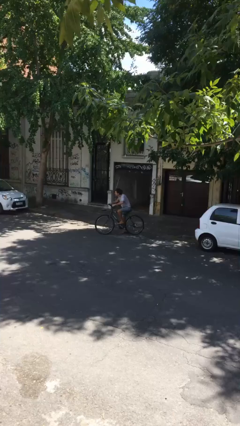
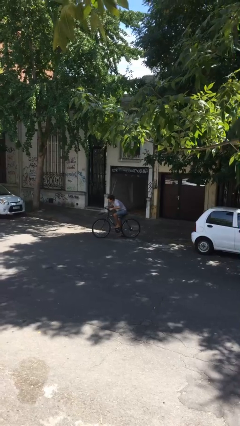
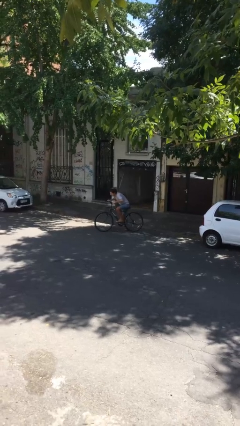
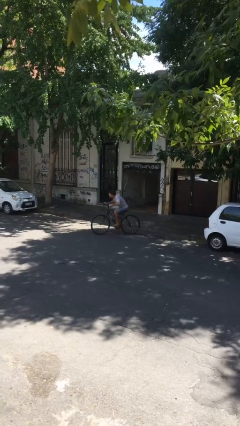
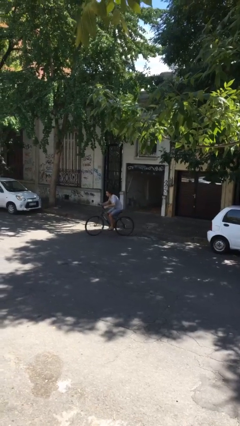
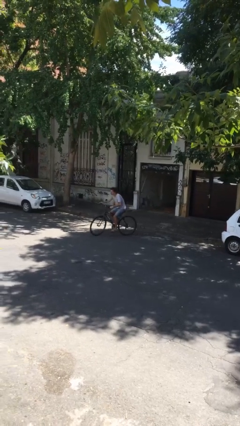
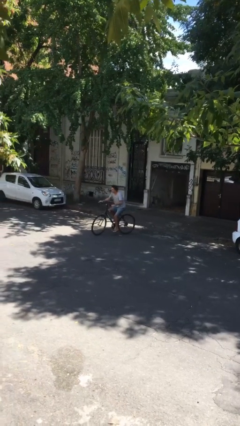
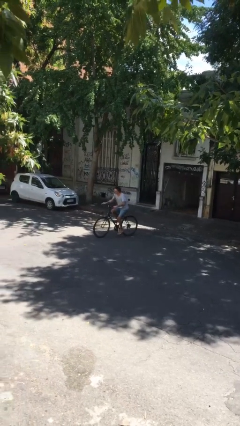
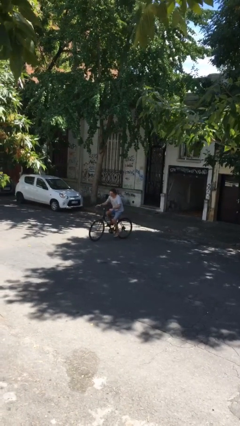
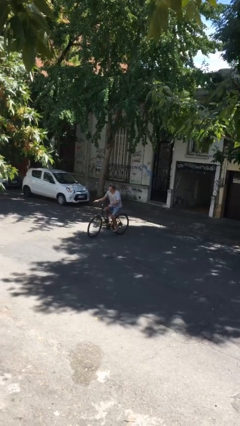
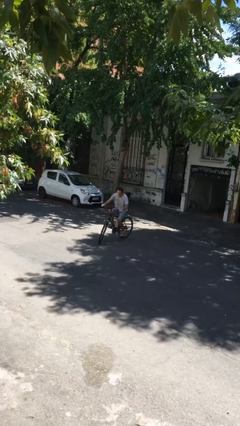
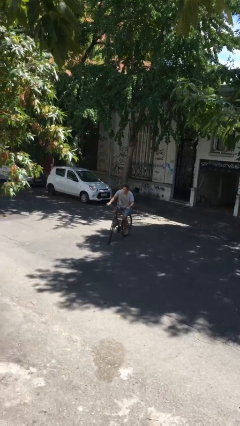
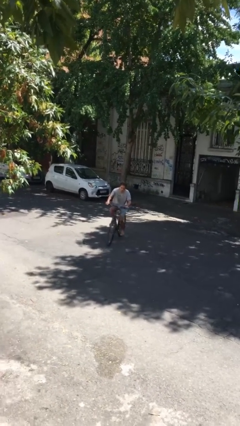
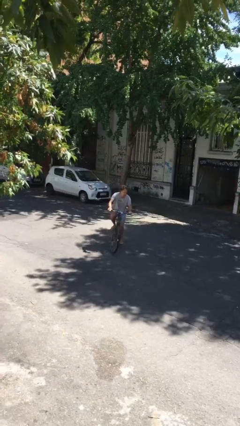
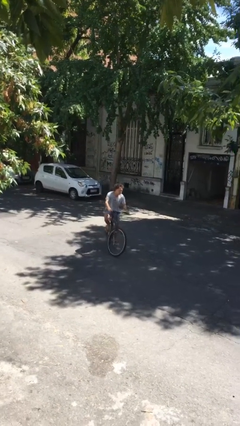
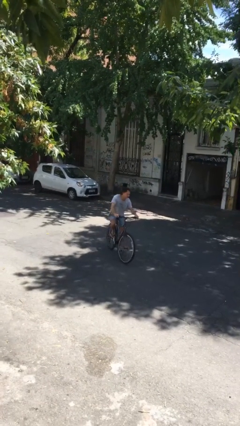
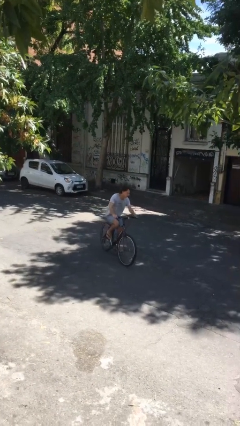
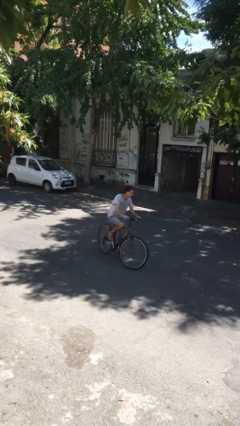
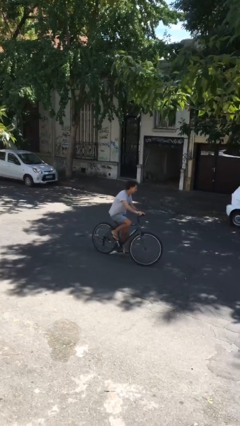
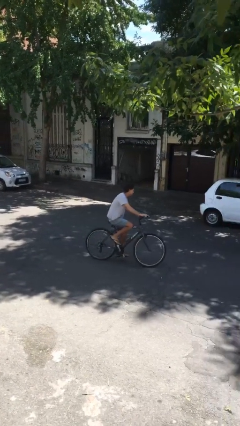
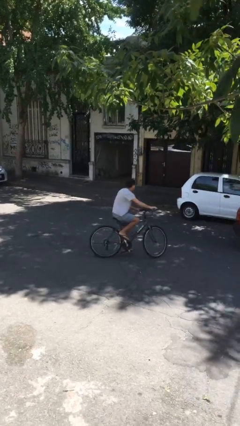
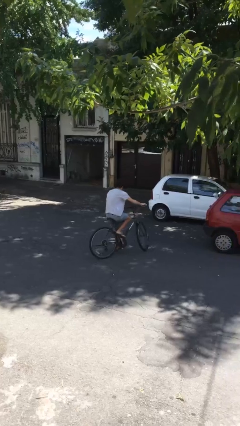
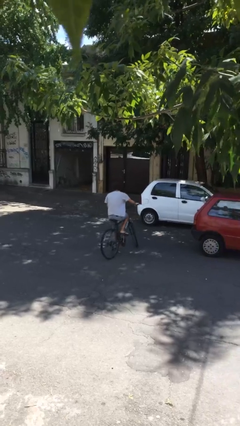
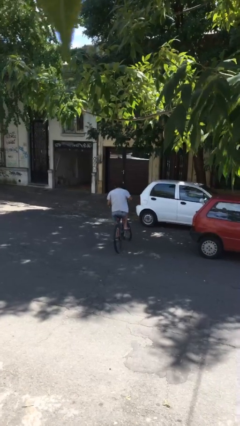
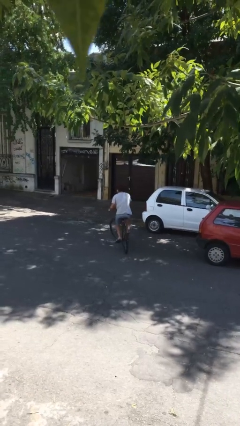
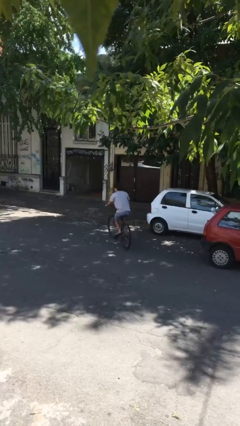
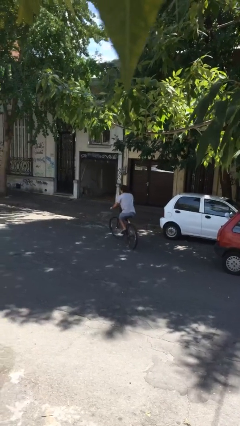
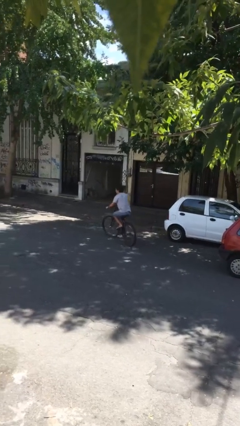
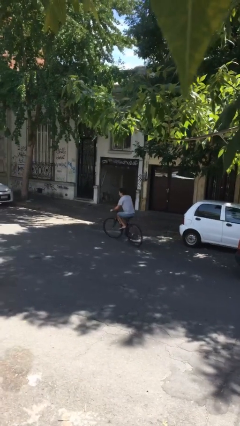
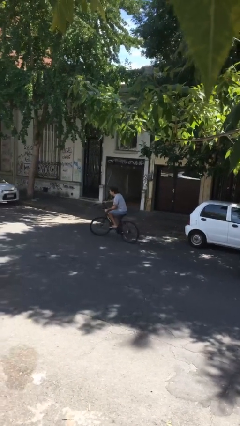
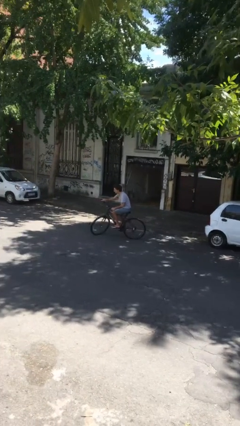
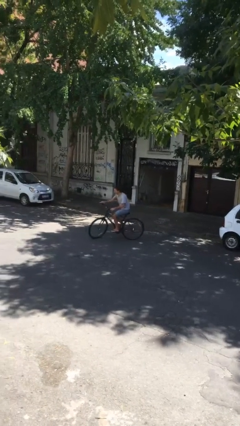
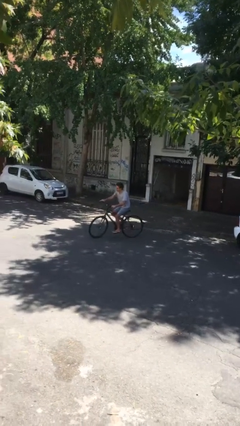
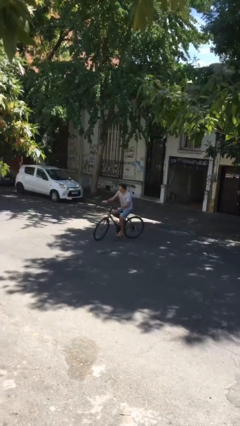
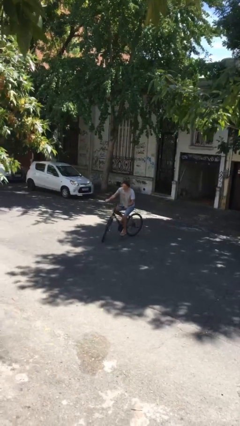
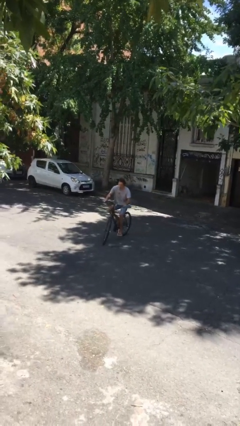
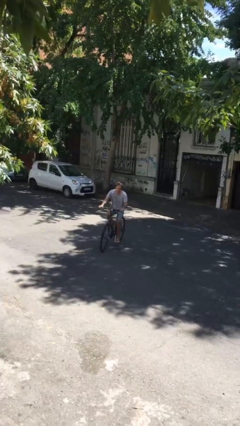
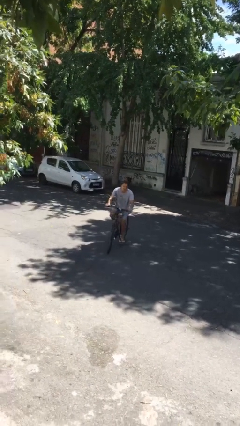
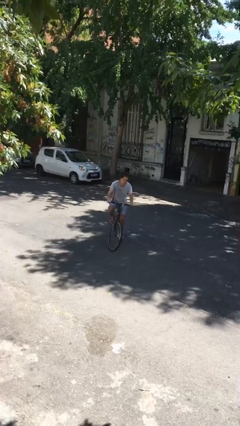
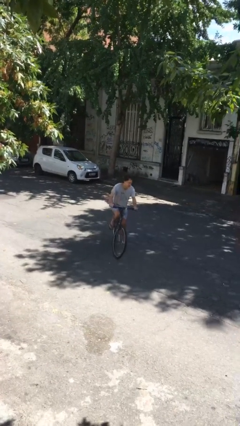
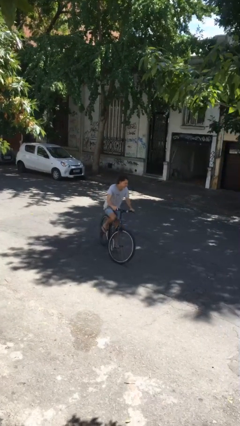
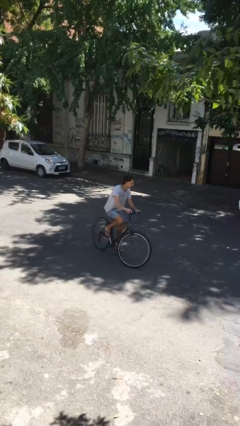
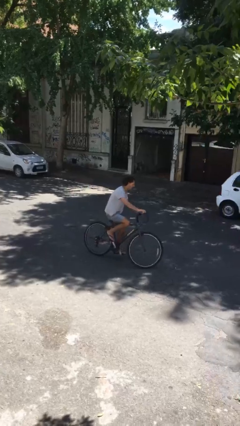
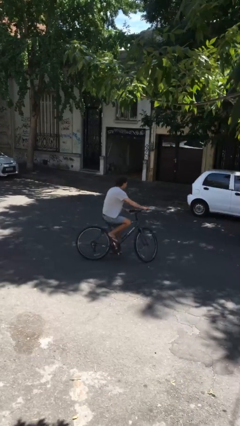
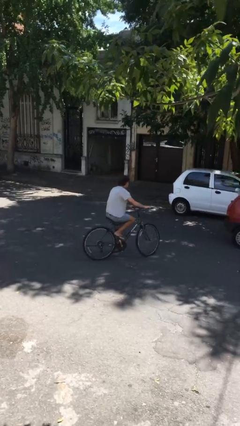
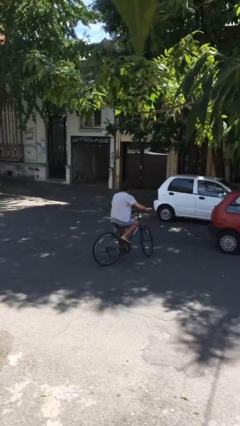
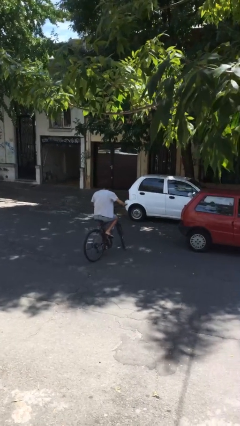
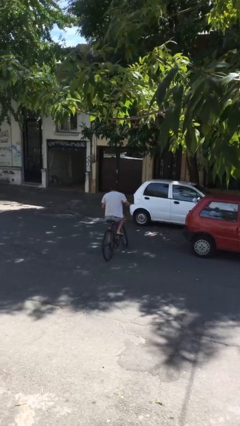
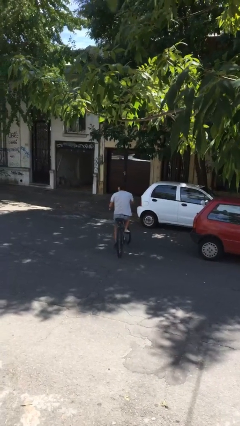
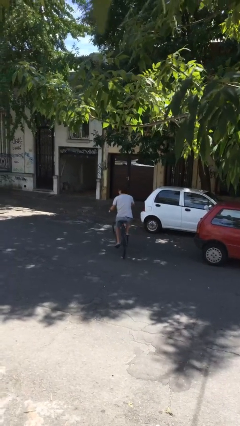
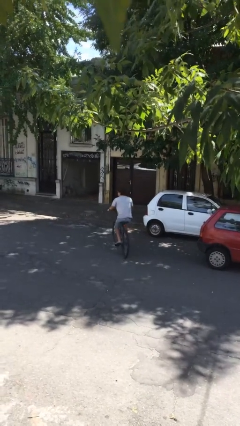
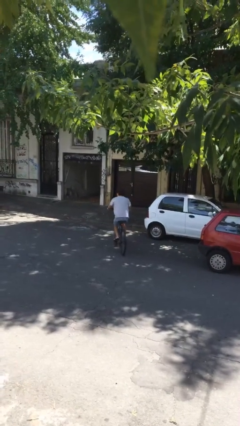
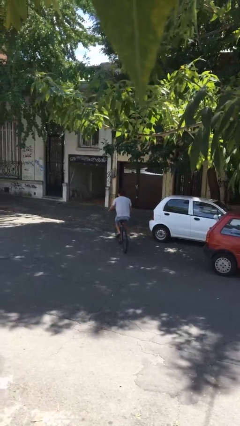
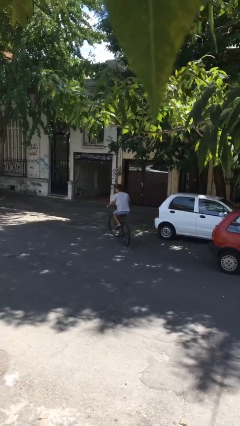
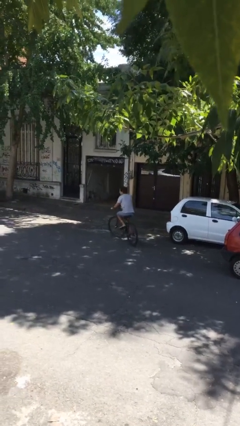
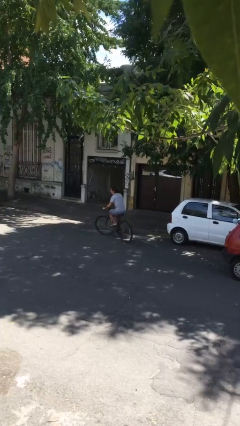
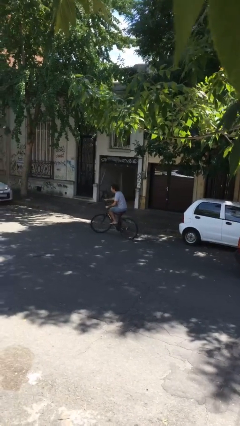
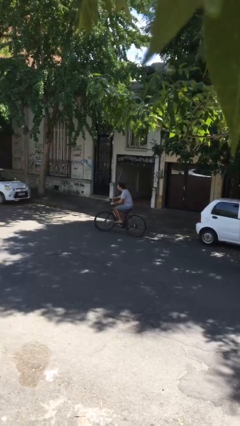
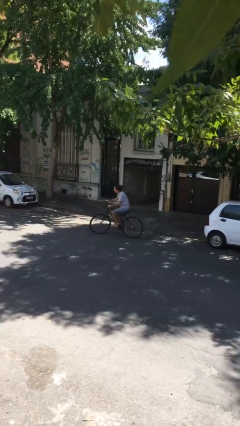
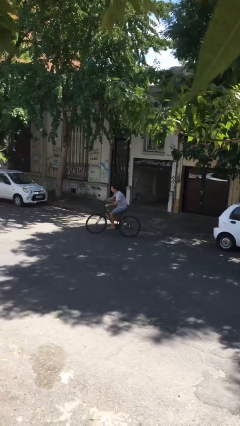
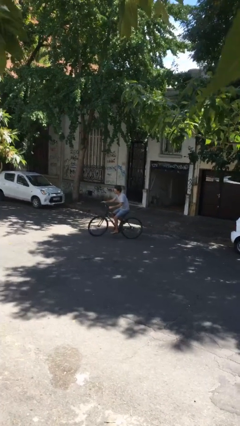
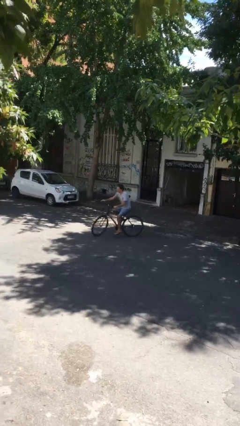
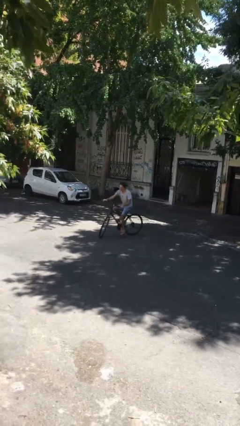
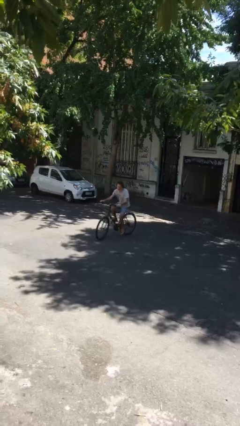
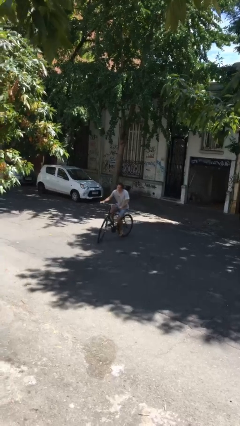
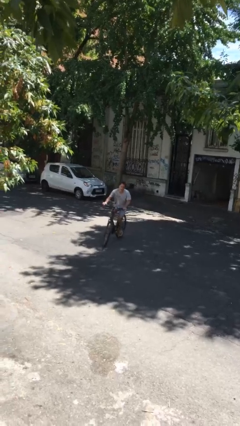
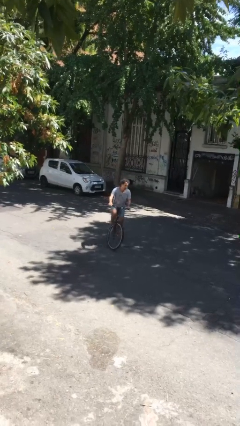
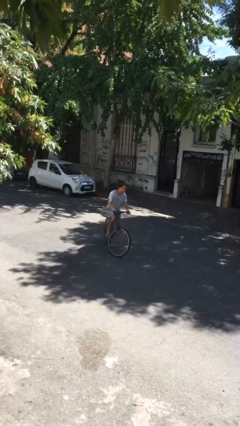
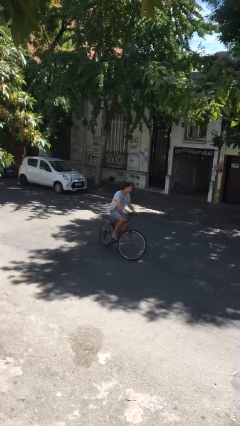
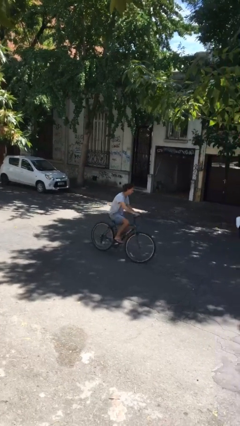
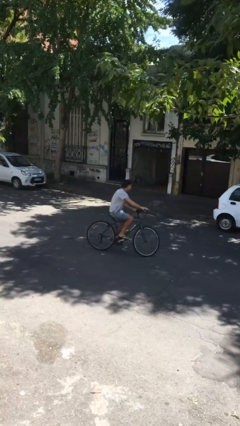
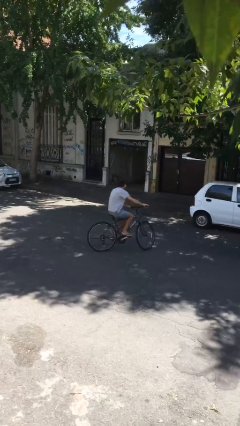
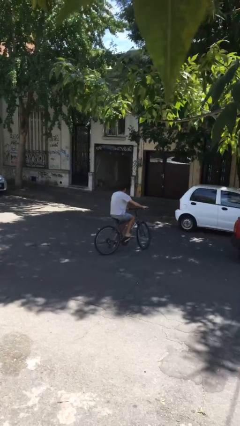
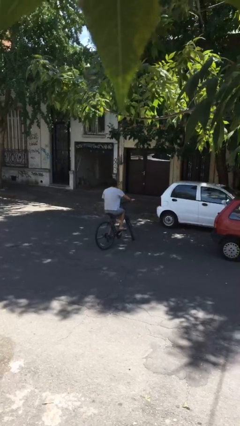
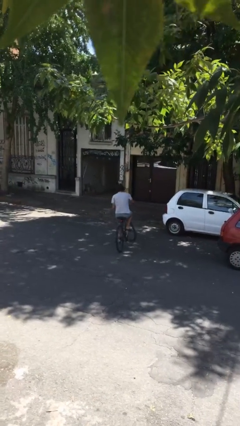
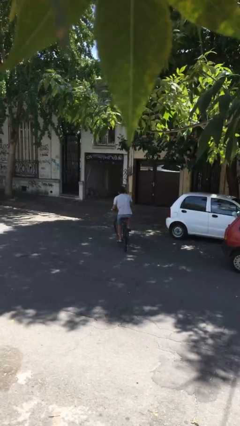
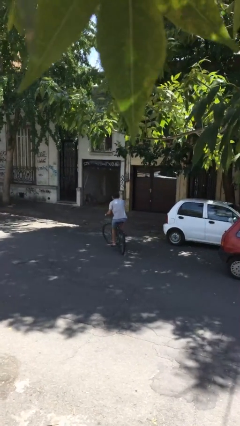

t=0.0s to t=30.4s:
person rides bicycle

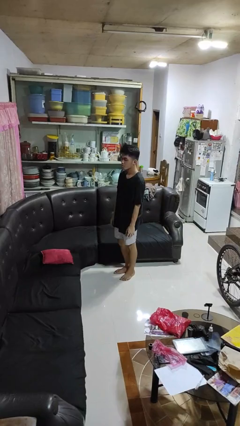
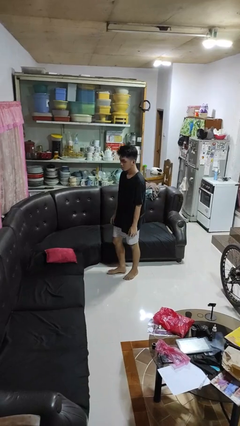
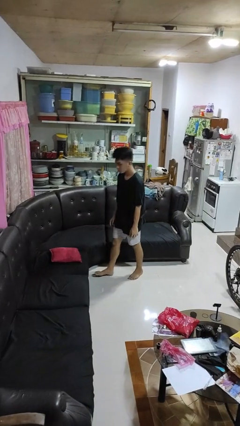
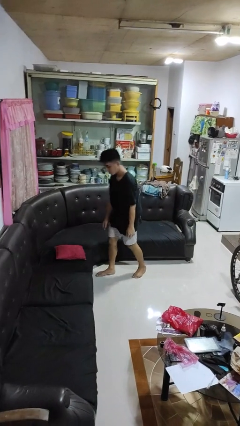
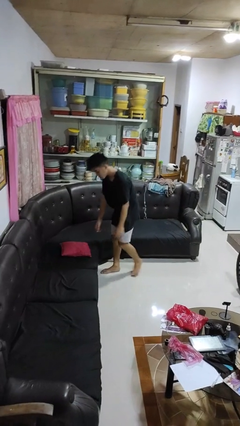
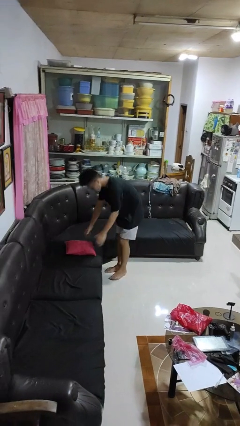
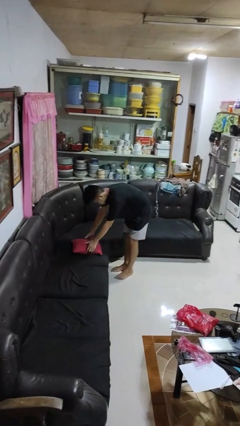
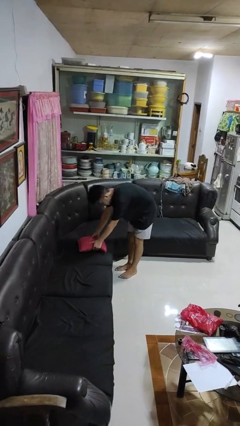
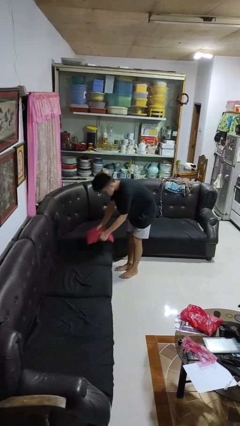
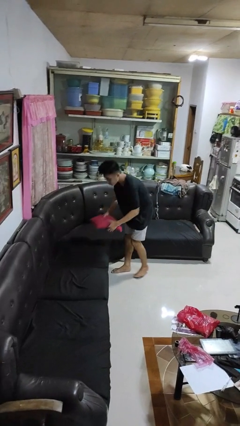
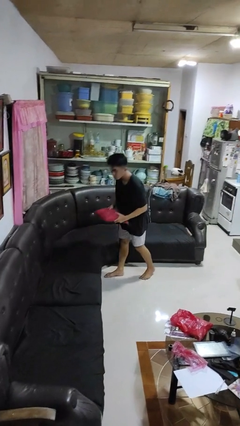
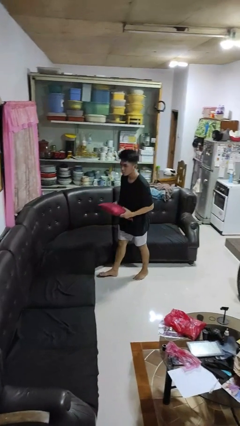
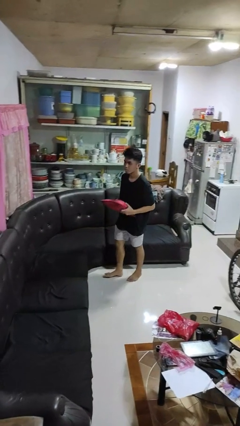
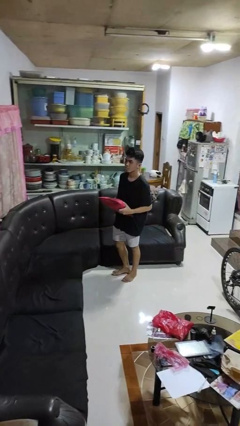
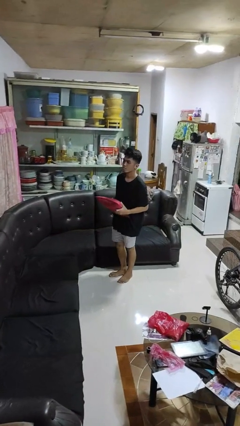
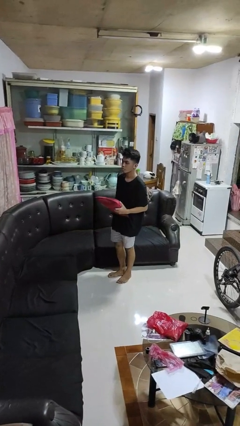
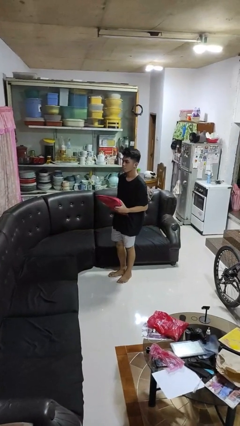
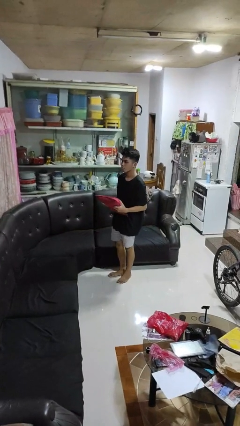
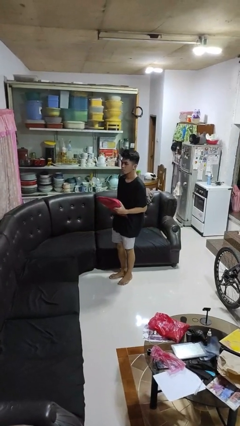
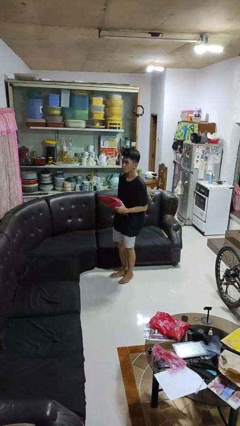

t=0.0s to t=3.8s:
person picks up object from couch
